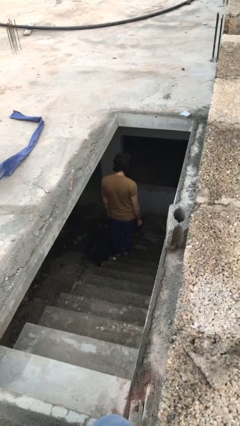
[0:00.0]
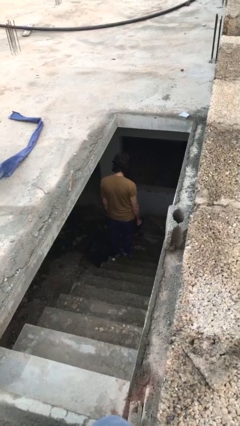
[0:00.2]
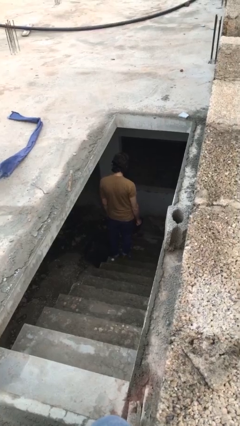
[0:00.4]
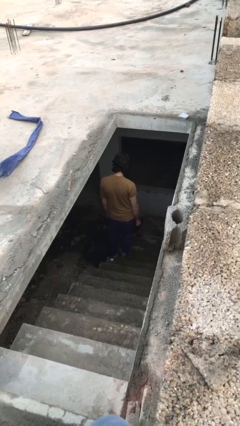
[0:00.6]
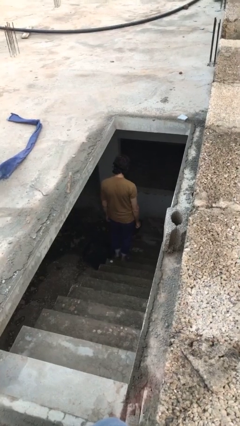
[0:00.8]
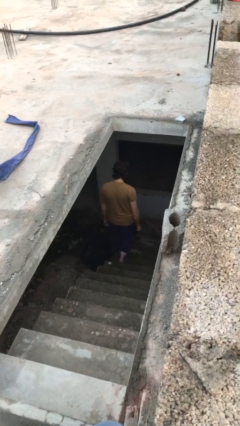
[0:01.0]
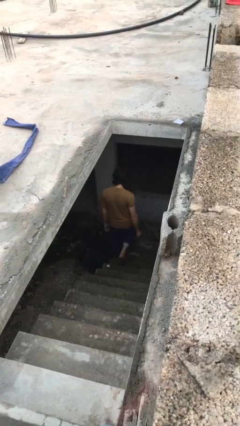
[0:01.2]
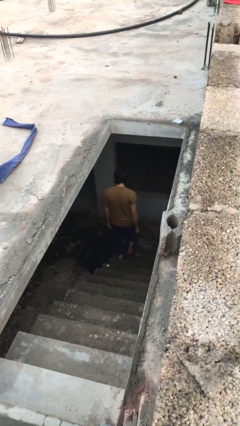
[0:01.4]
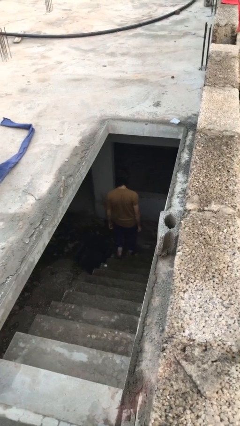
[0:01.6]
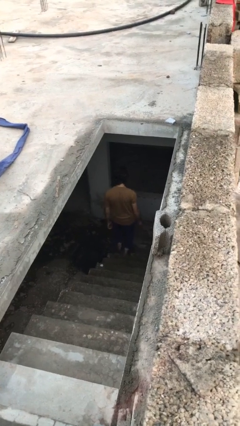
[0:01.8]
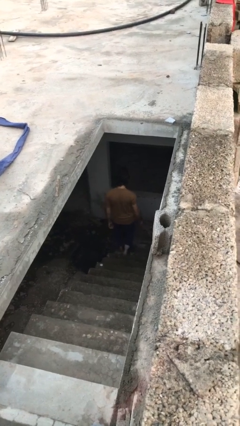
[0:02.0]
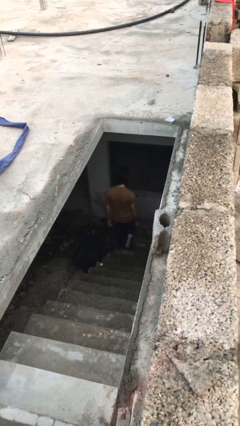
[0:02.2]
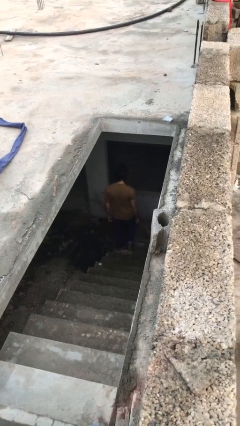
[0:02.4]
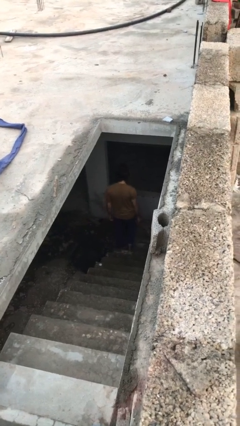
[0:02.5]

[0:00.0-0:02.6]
person climbs down stairs

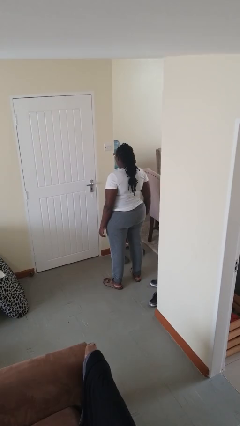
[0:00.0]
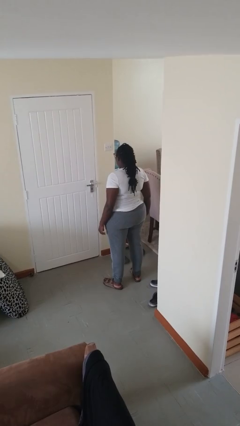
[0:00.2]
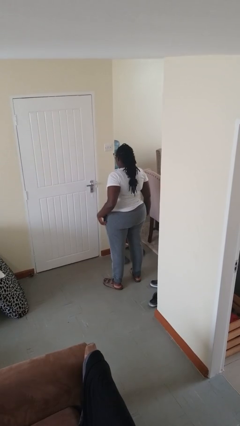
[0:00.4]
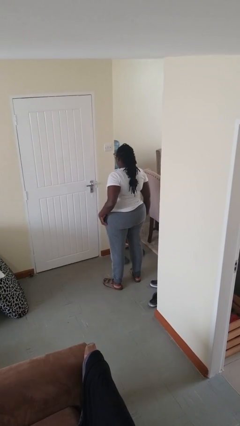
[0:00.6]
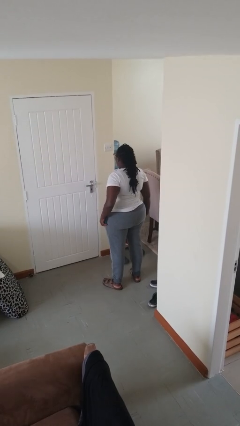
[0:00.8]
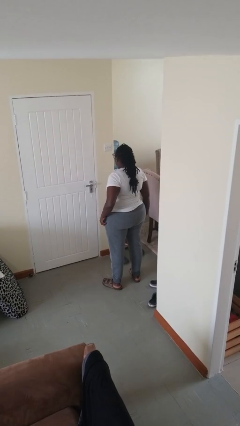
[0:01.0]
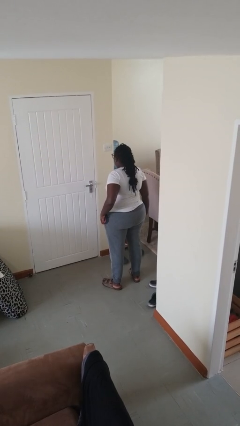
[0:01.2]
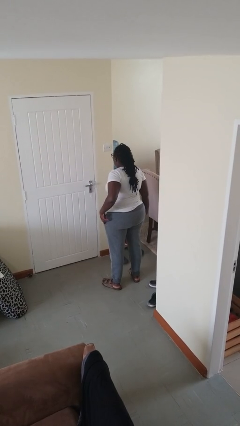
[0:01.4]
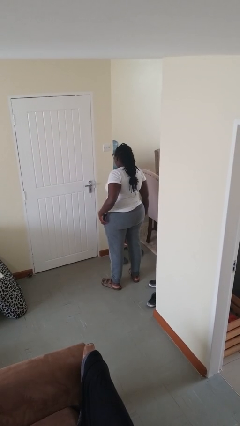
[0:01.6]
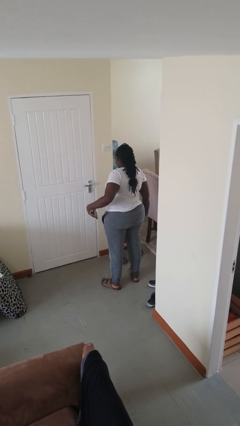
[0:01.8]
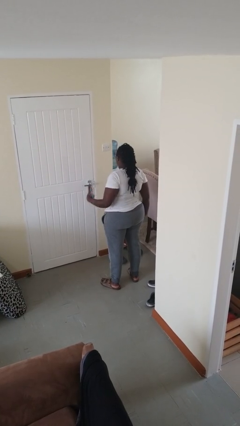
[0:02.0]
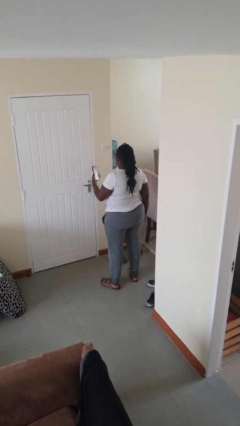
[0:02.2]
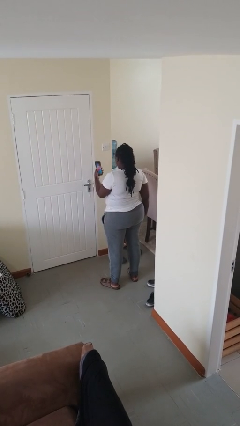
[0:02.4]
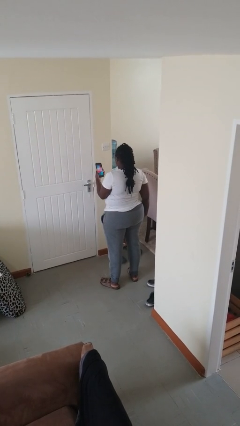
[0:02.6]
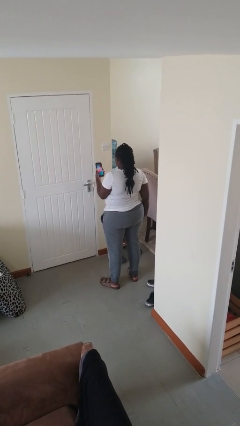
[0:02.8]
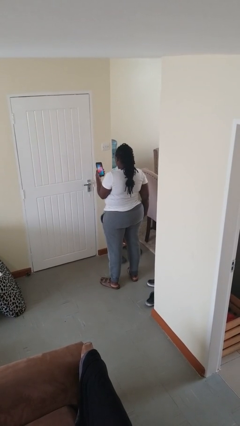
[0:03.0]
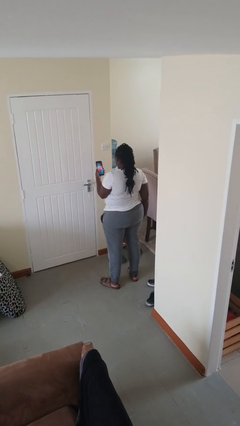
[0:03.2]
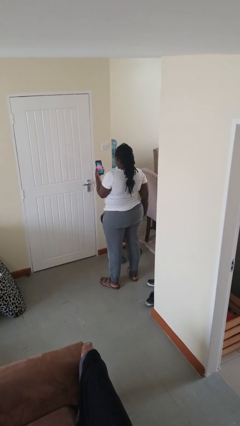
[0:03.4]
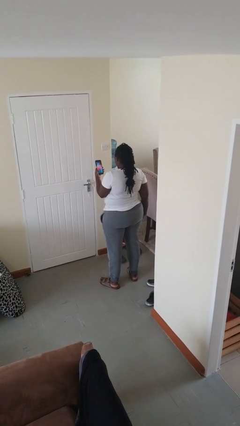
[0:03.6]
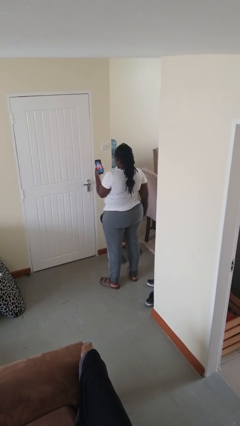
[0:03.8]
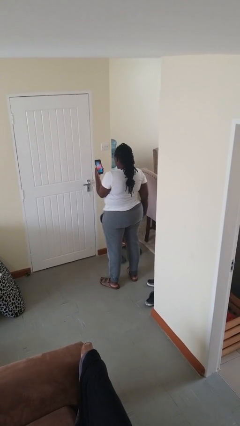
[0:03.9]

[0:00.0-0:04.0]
person takes phone from pocket

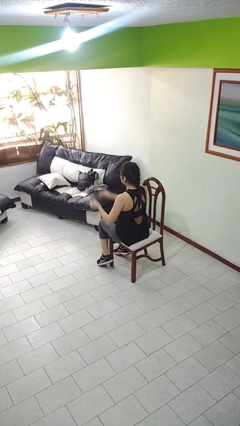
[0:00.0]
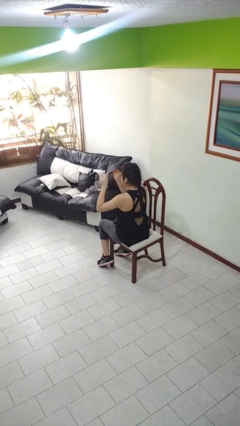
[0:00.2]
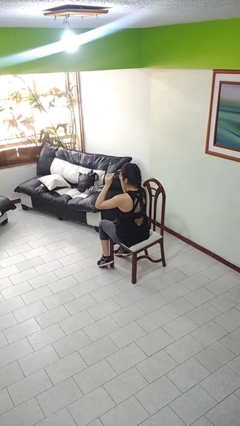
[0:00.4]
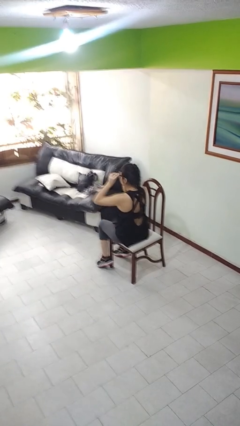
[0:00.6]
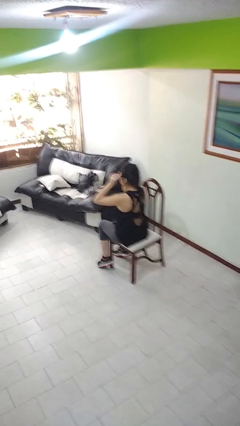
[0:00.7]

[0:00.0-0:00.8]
person puts on glasses

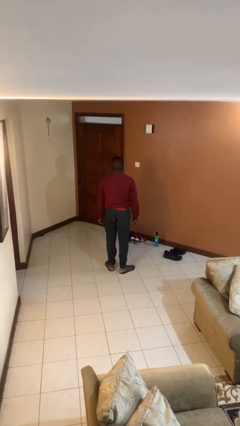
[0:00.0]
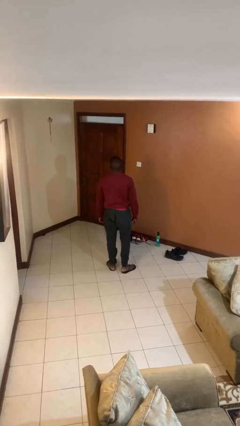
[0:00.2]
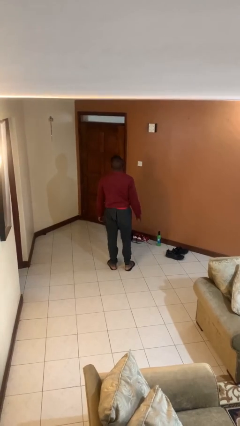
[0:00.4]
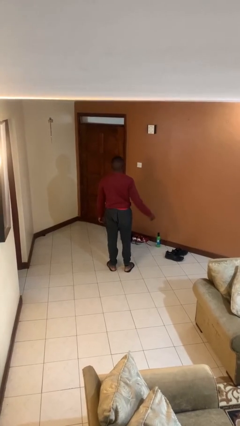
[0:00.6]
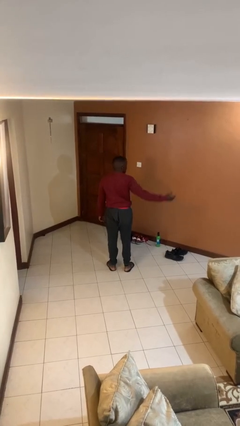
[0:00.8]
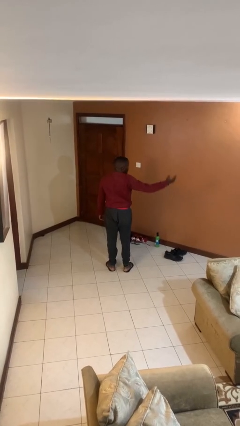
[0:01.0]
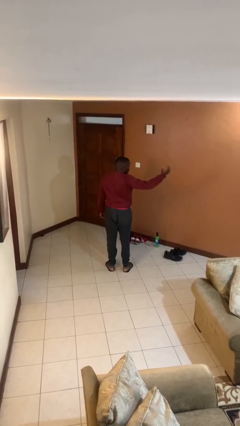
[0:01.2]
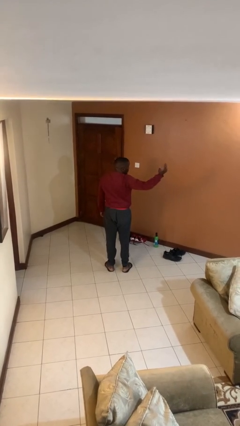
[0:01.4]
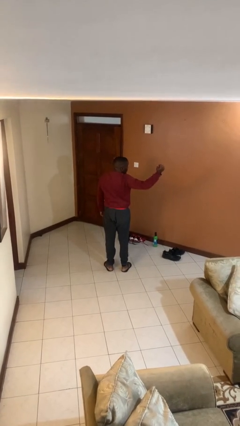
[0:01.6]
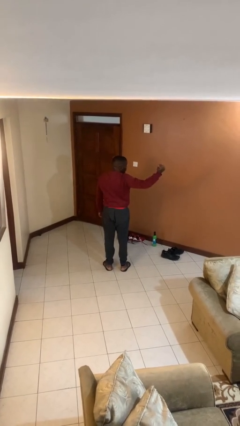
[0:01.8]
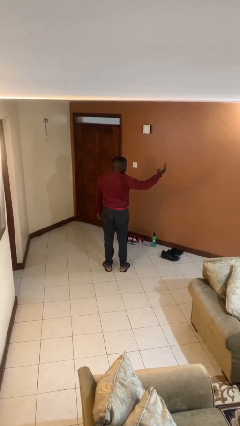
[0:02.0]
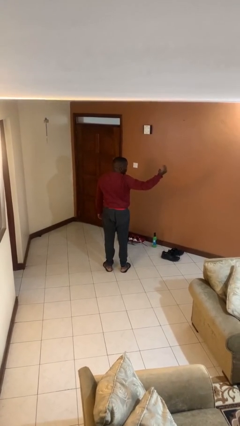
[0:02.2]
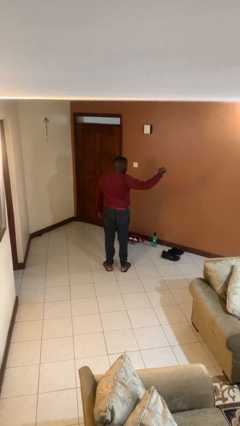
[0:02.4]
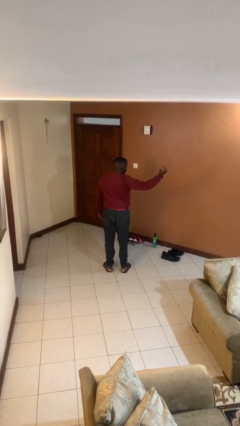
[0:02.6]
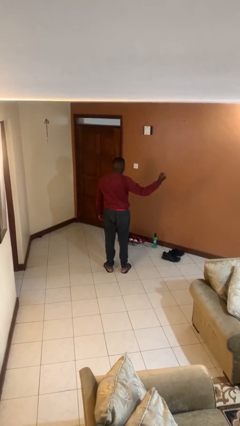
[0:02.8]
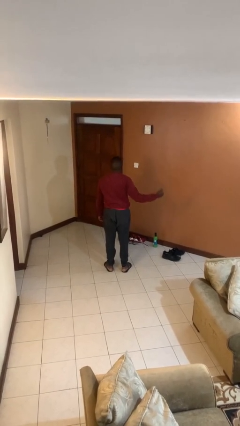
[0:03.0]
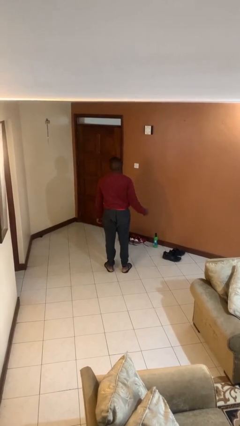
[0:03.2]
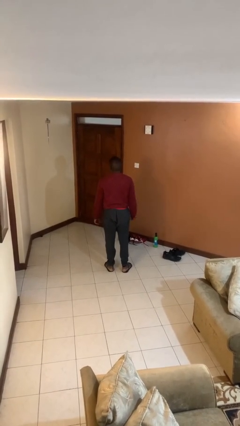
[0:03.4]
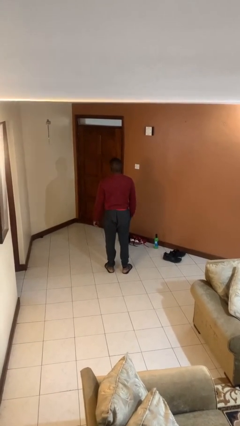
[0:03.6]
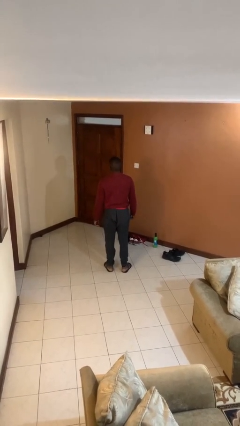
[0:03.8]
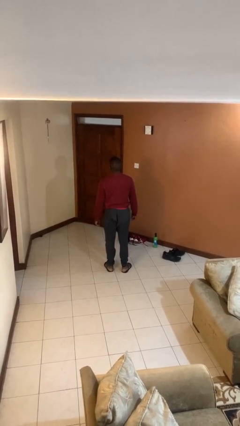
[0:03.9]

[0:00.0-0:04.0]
person gestures come here

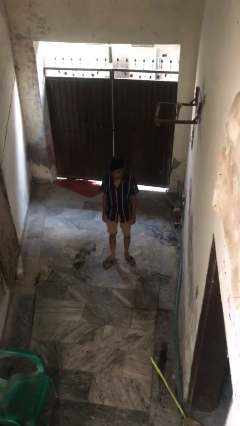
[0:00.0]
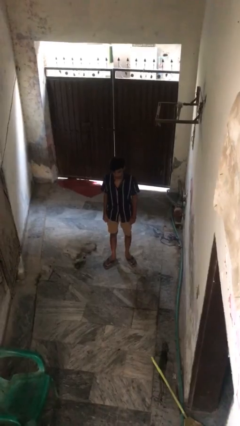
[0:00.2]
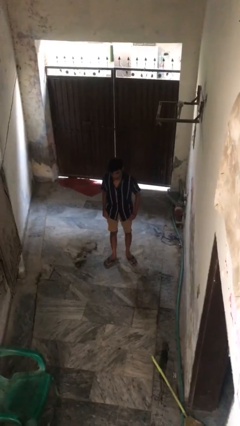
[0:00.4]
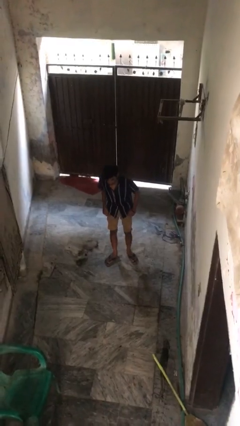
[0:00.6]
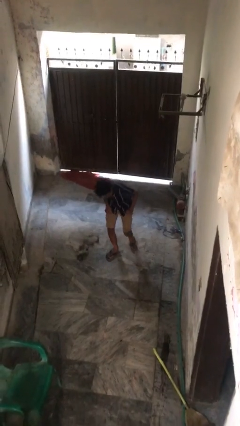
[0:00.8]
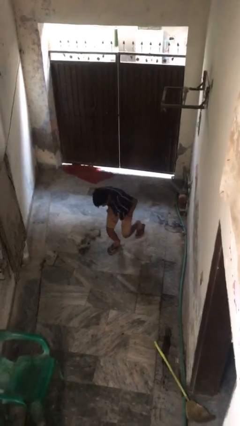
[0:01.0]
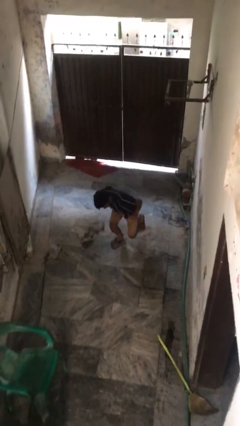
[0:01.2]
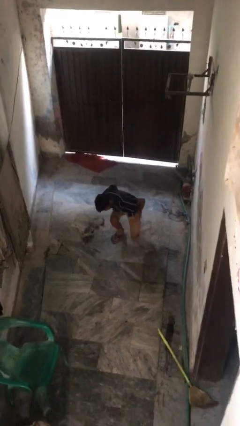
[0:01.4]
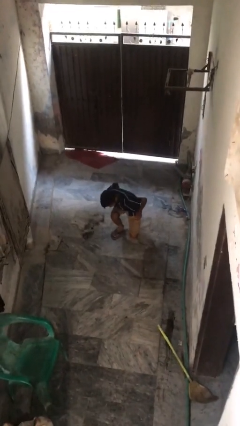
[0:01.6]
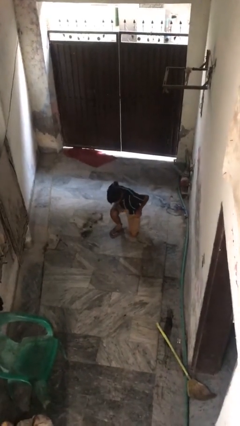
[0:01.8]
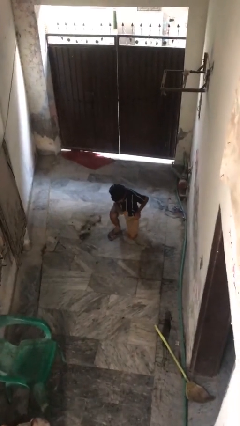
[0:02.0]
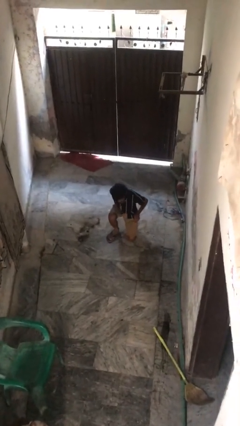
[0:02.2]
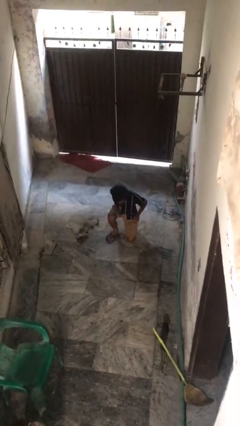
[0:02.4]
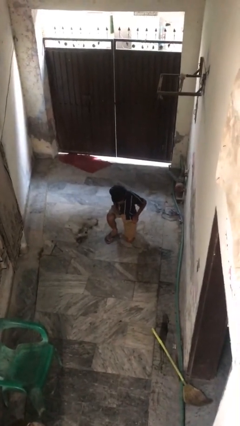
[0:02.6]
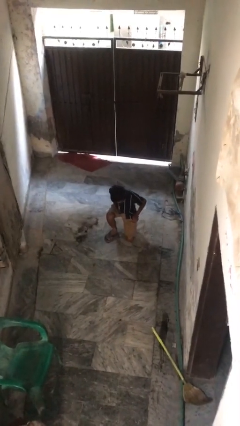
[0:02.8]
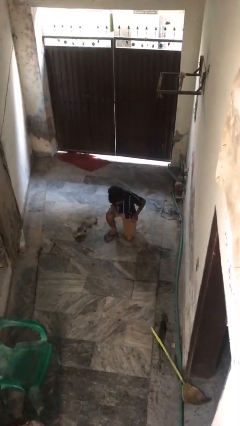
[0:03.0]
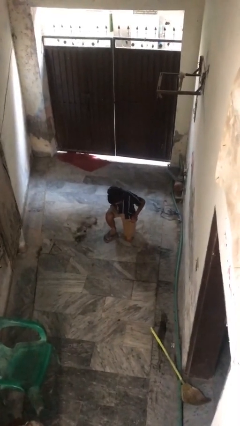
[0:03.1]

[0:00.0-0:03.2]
person kneels

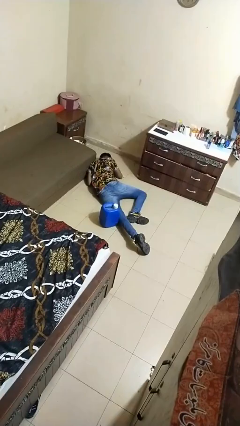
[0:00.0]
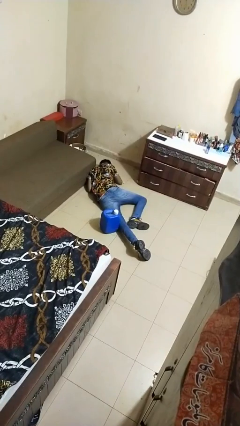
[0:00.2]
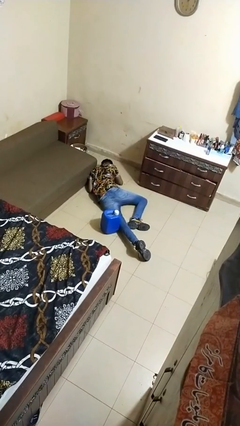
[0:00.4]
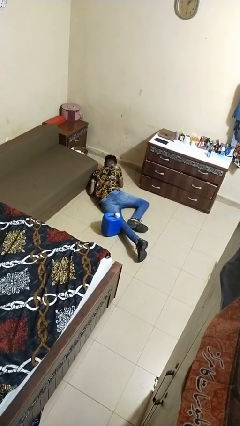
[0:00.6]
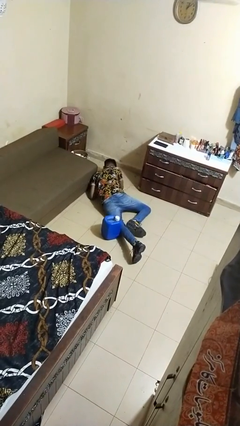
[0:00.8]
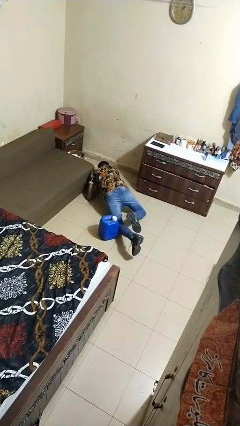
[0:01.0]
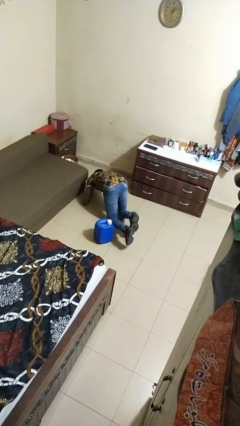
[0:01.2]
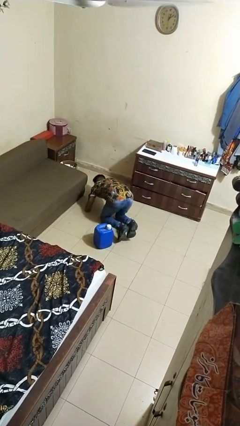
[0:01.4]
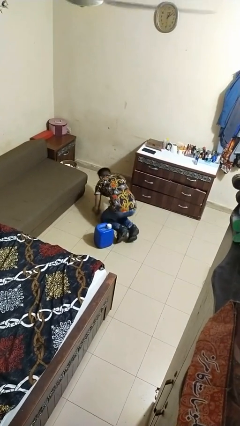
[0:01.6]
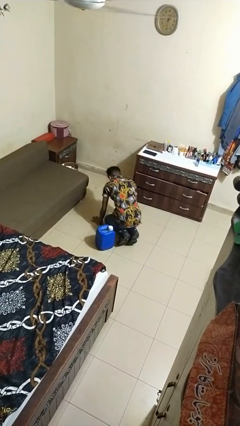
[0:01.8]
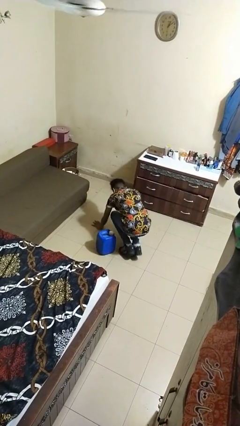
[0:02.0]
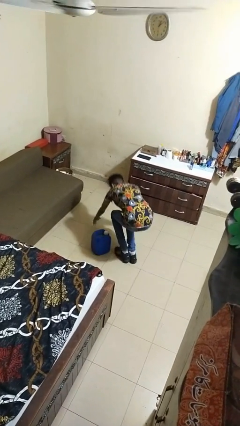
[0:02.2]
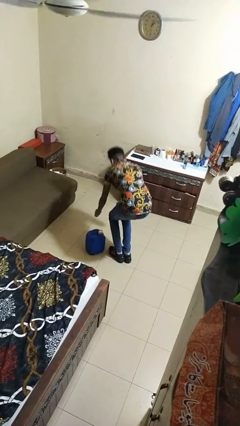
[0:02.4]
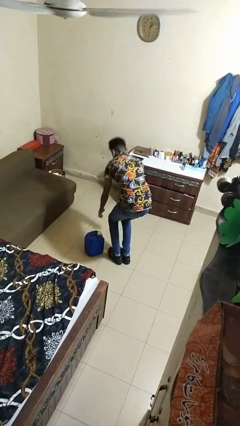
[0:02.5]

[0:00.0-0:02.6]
person stands up from floor

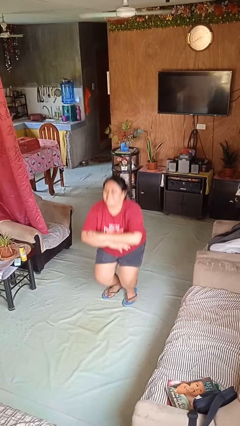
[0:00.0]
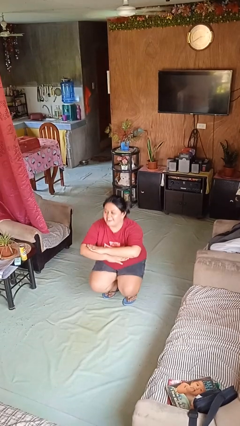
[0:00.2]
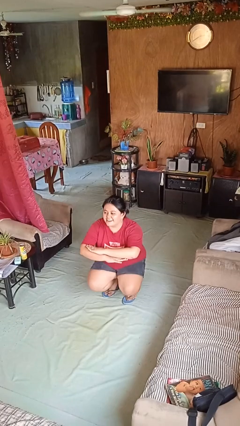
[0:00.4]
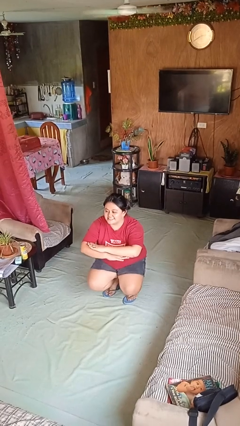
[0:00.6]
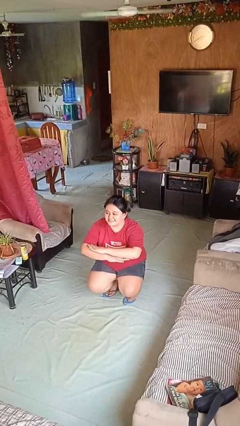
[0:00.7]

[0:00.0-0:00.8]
person squats
